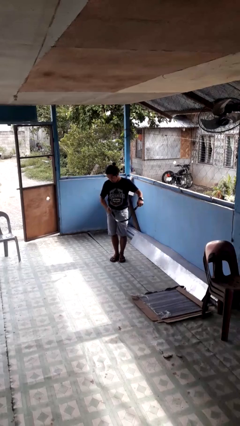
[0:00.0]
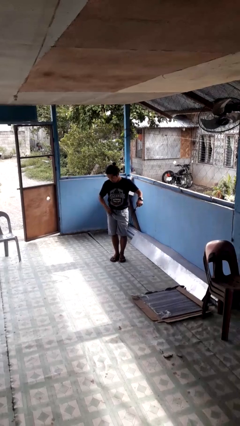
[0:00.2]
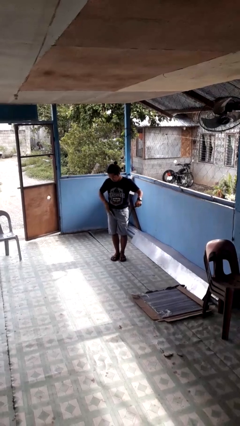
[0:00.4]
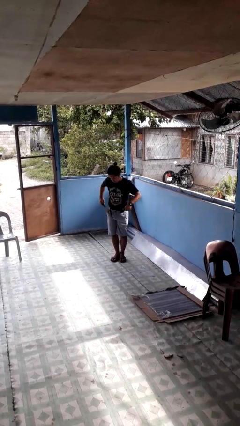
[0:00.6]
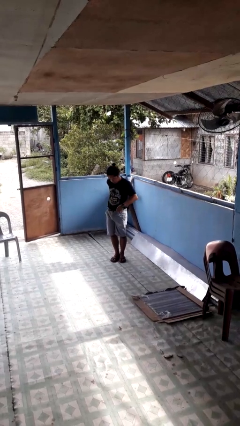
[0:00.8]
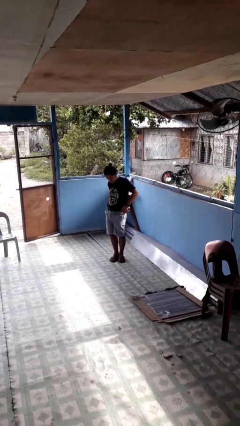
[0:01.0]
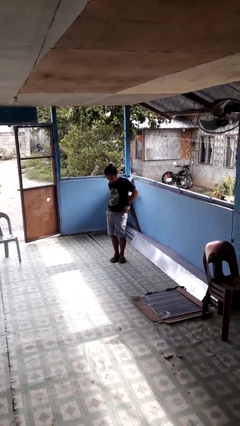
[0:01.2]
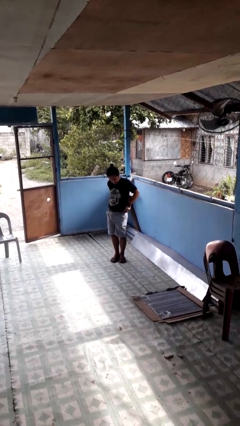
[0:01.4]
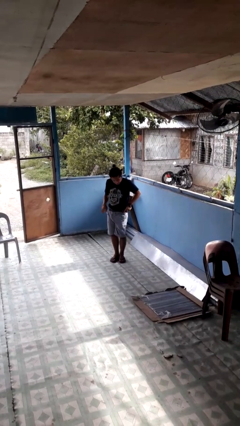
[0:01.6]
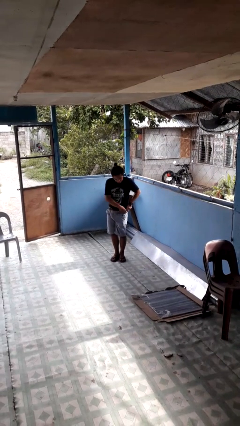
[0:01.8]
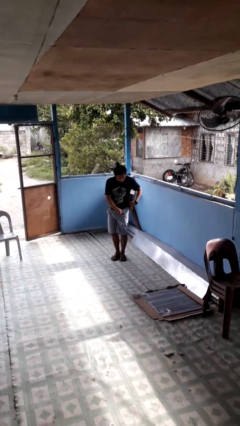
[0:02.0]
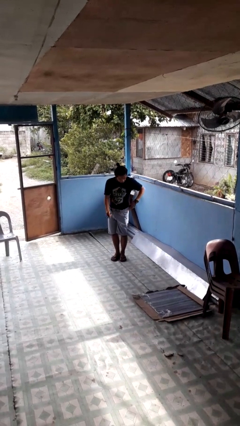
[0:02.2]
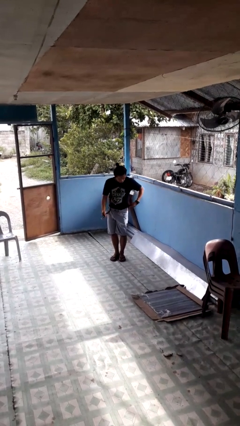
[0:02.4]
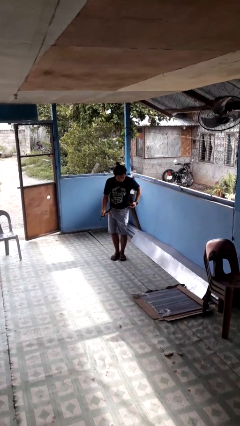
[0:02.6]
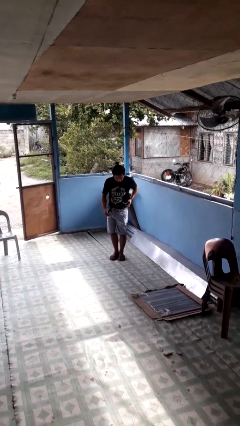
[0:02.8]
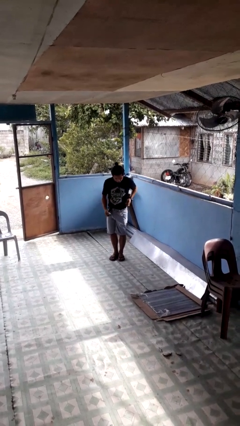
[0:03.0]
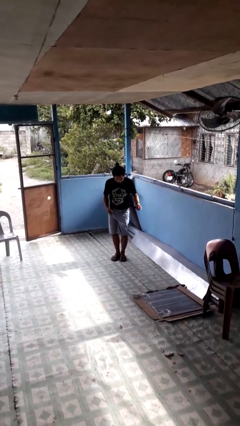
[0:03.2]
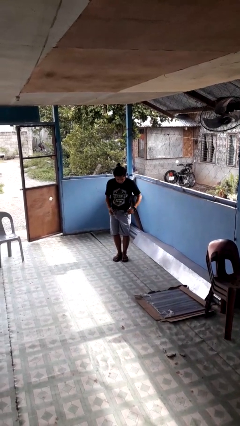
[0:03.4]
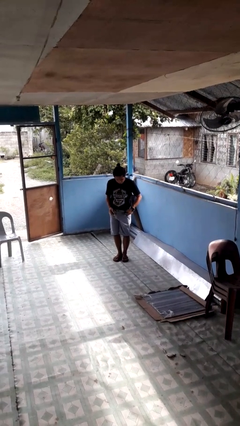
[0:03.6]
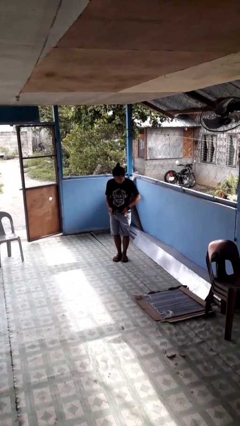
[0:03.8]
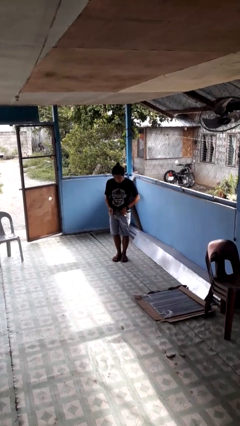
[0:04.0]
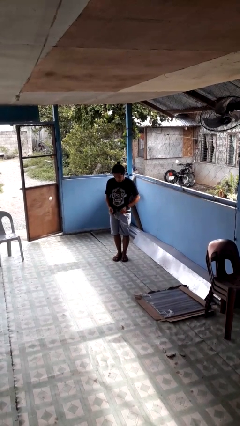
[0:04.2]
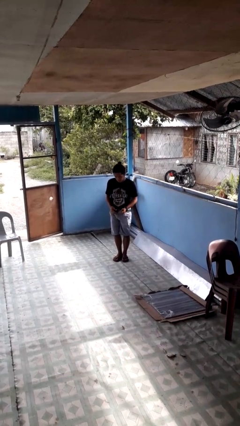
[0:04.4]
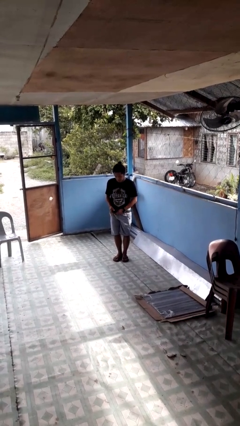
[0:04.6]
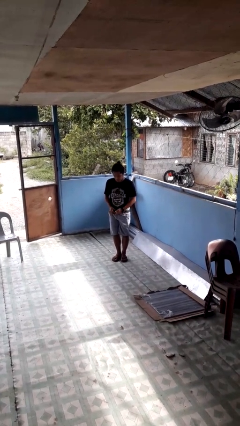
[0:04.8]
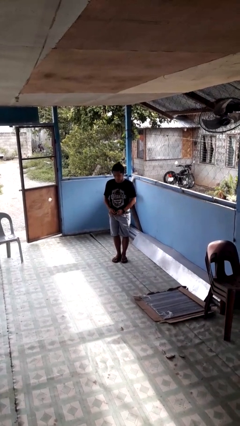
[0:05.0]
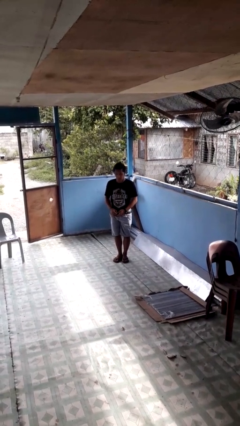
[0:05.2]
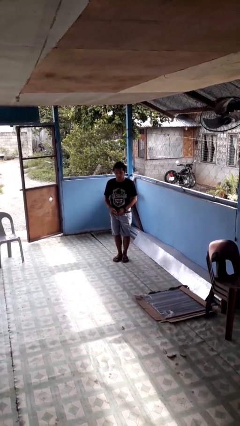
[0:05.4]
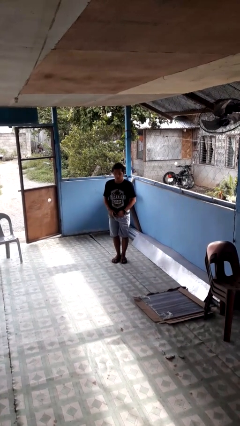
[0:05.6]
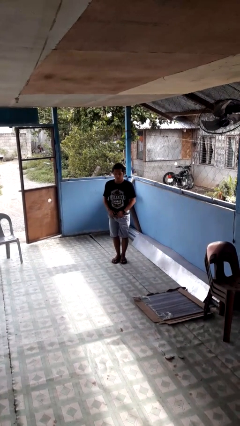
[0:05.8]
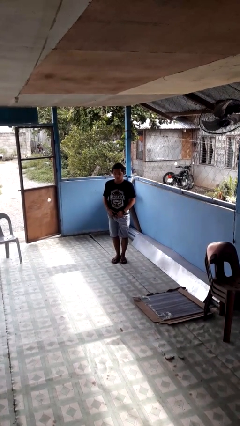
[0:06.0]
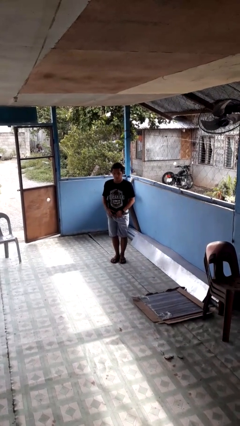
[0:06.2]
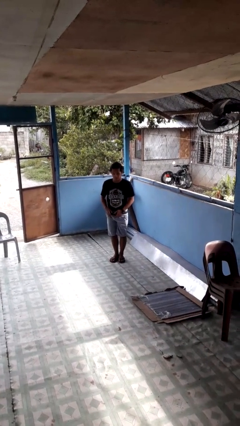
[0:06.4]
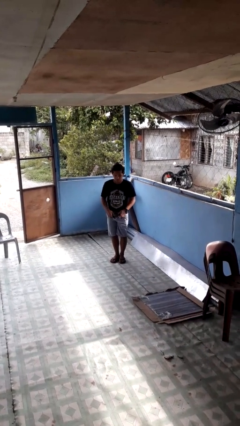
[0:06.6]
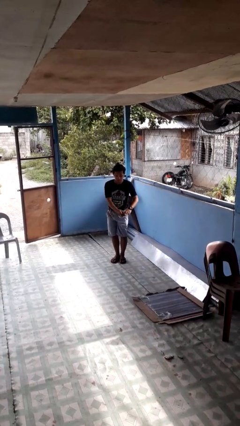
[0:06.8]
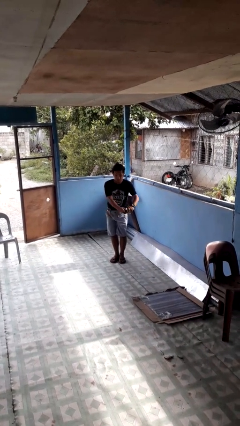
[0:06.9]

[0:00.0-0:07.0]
person puts on belt

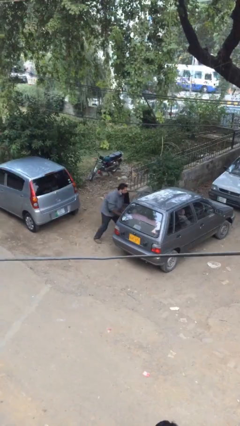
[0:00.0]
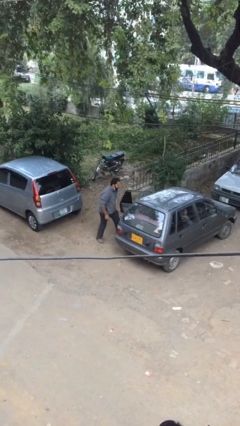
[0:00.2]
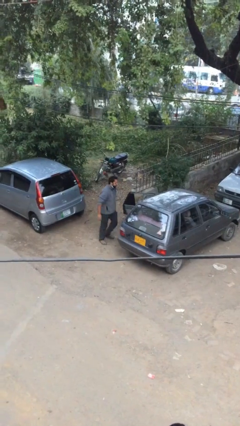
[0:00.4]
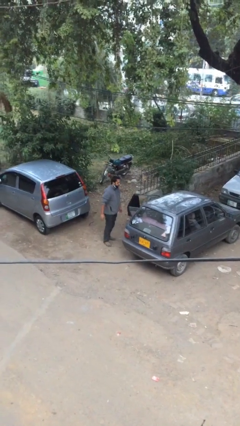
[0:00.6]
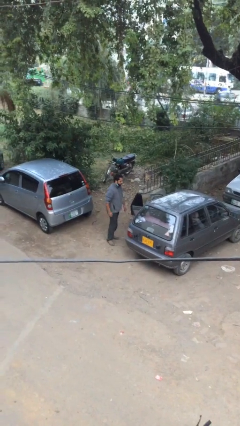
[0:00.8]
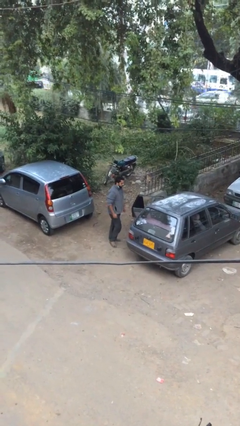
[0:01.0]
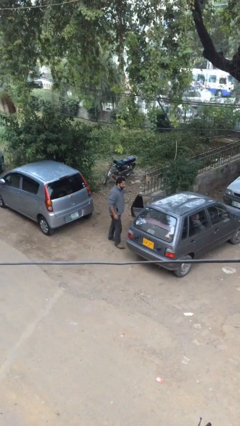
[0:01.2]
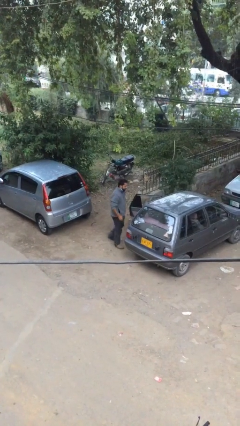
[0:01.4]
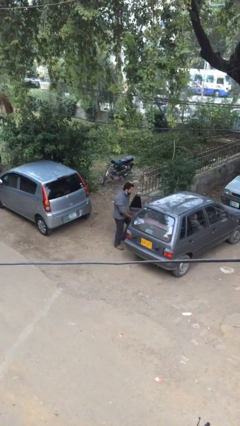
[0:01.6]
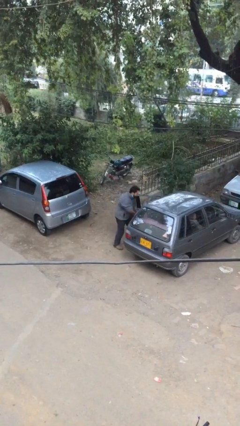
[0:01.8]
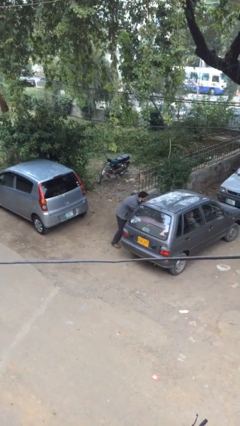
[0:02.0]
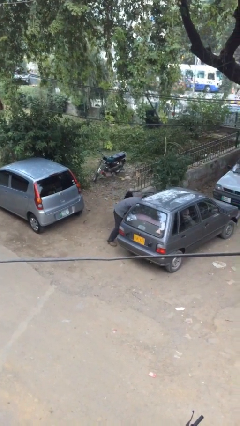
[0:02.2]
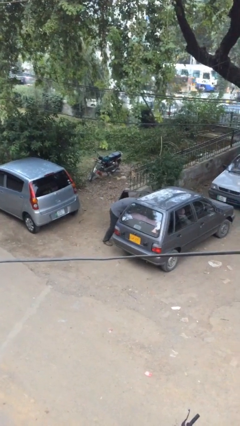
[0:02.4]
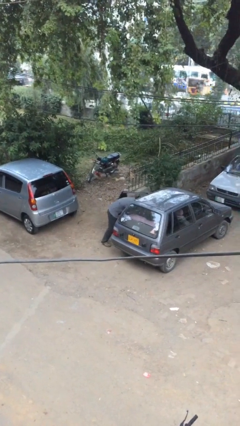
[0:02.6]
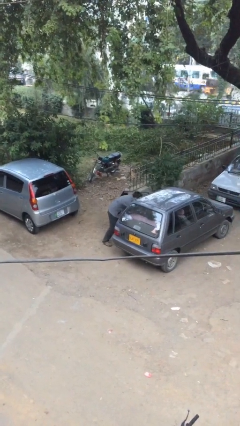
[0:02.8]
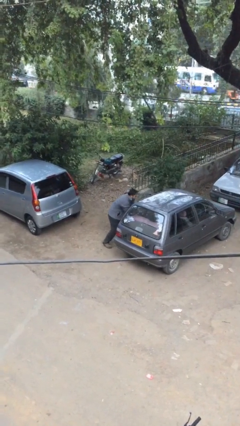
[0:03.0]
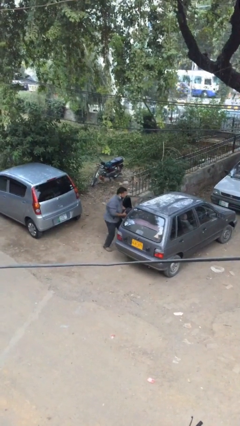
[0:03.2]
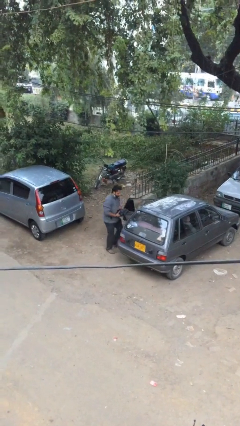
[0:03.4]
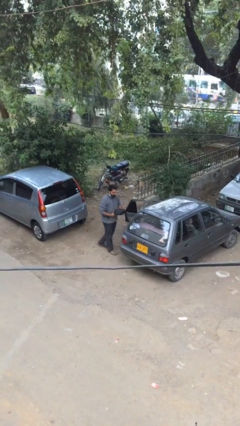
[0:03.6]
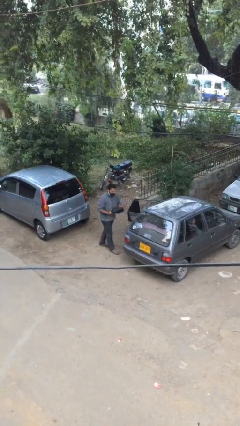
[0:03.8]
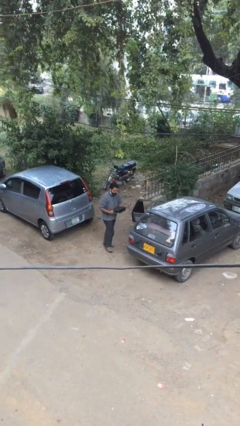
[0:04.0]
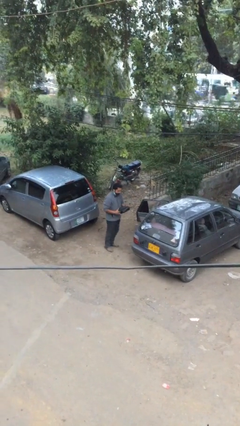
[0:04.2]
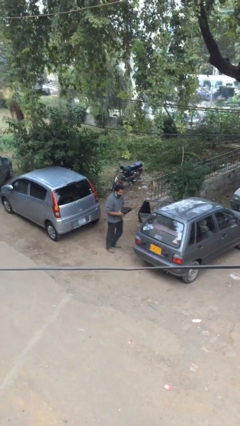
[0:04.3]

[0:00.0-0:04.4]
person unloads car

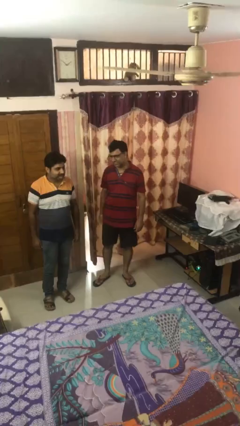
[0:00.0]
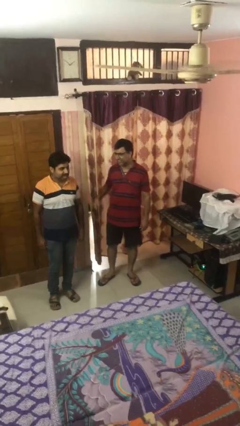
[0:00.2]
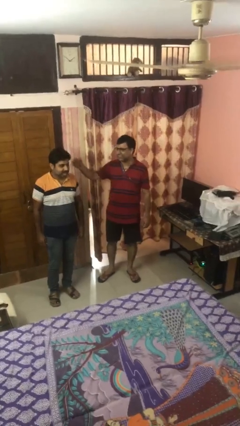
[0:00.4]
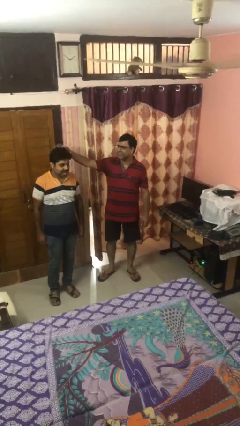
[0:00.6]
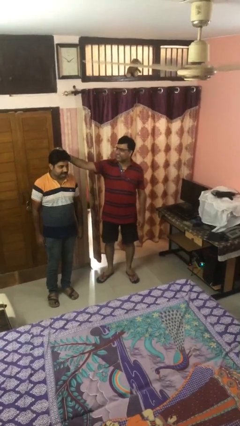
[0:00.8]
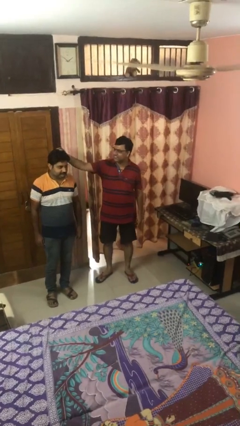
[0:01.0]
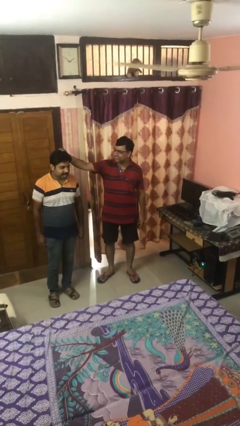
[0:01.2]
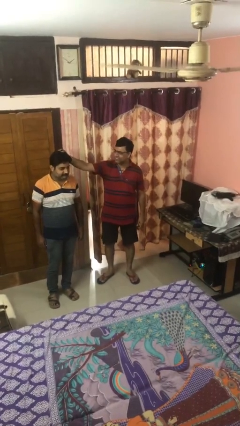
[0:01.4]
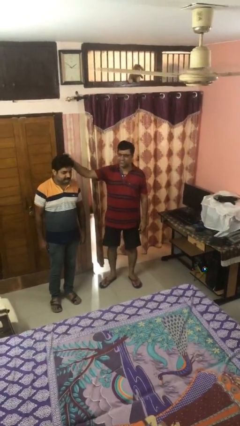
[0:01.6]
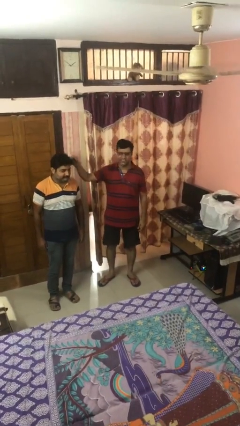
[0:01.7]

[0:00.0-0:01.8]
person grabs person by hair

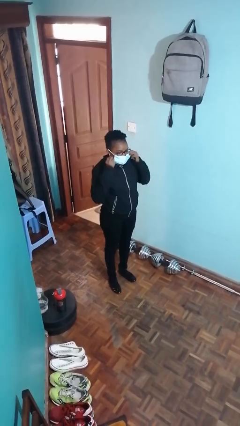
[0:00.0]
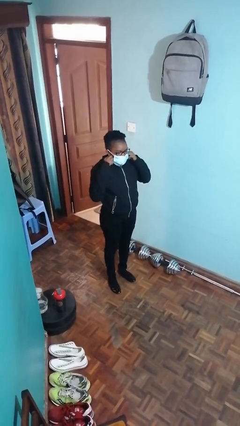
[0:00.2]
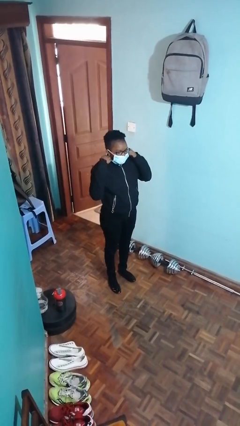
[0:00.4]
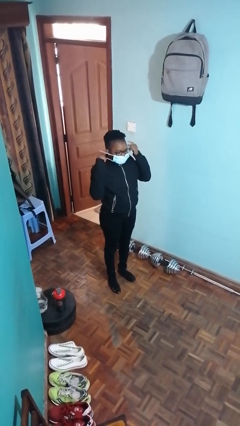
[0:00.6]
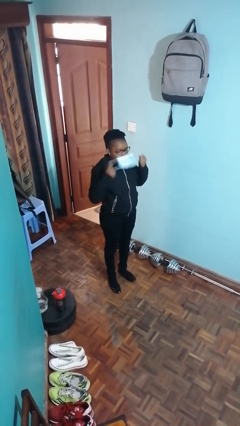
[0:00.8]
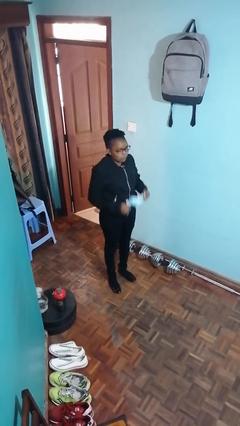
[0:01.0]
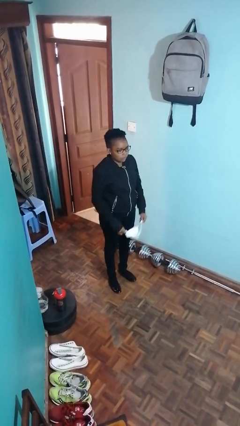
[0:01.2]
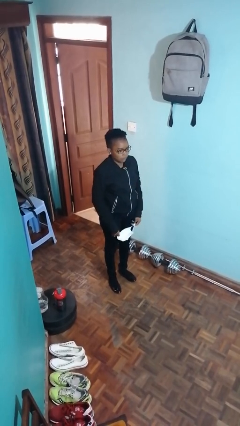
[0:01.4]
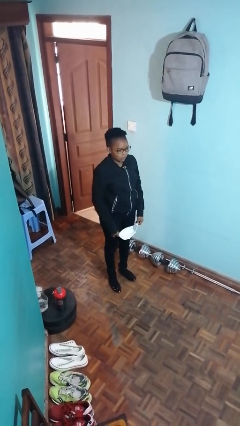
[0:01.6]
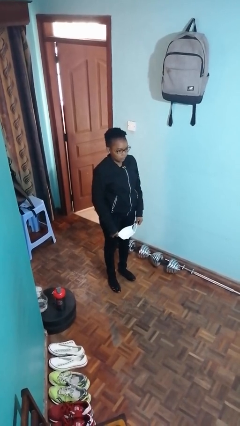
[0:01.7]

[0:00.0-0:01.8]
person takes off facemask

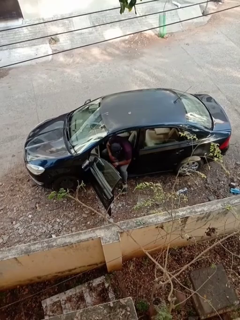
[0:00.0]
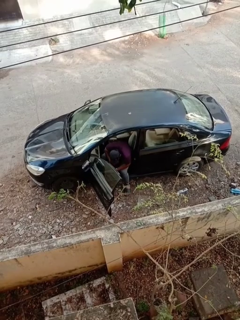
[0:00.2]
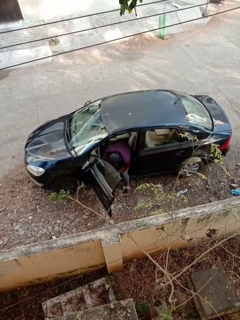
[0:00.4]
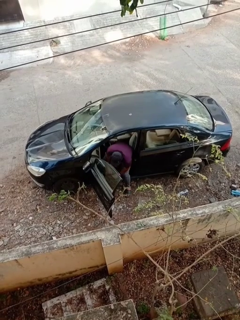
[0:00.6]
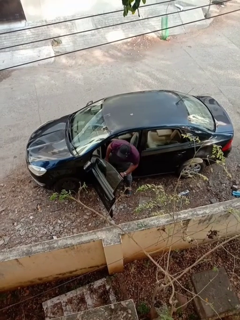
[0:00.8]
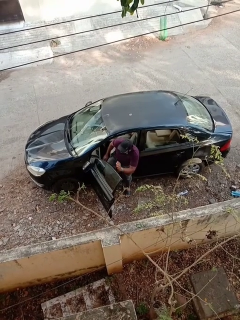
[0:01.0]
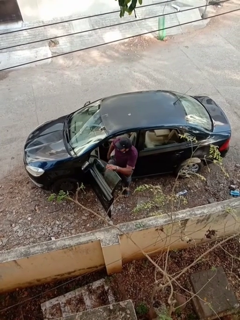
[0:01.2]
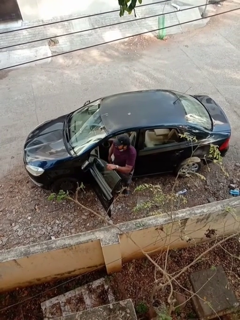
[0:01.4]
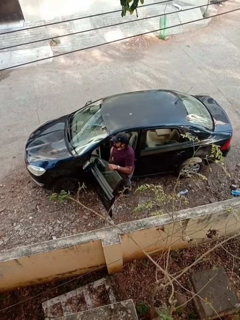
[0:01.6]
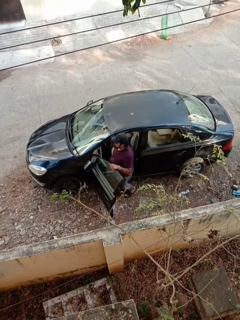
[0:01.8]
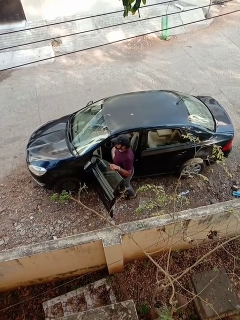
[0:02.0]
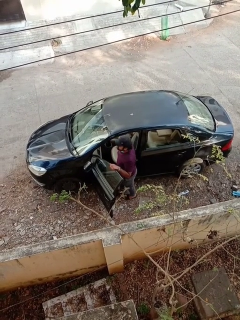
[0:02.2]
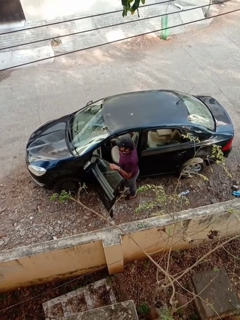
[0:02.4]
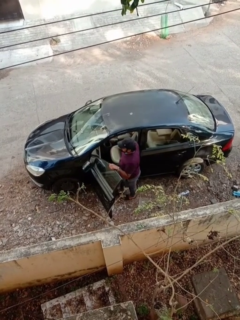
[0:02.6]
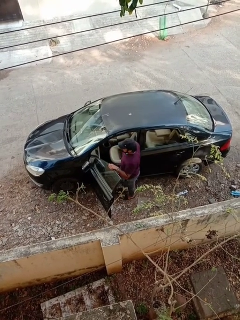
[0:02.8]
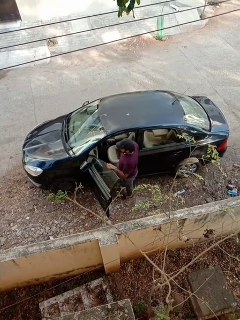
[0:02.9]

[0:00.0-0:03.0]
person exits car

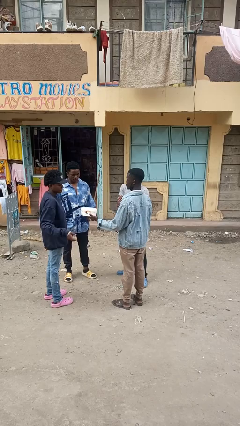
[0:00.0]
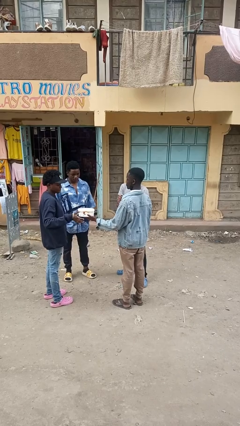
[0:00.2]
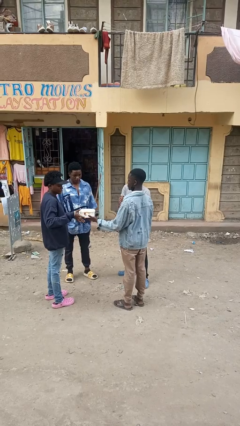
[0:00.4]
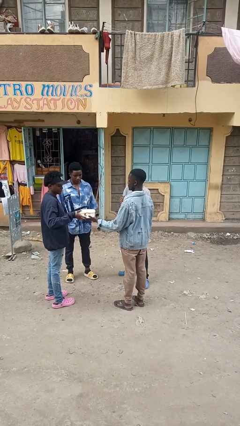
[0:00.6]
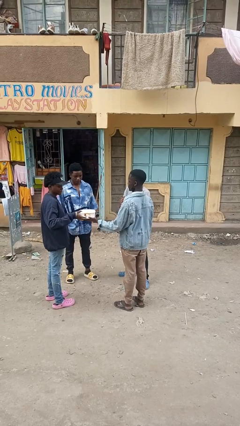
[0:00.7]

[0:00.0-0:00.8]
person transfers object to person
